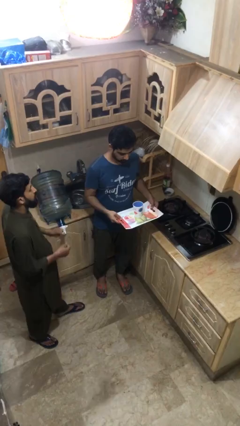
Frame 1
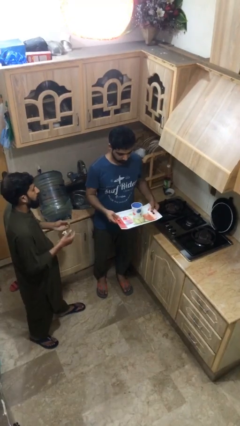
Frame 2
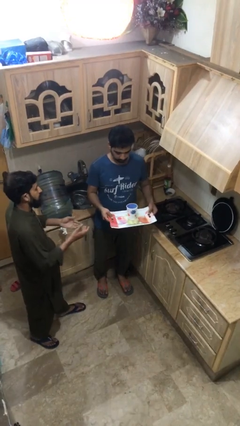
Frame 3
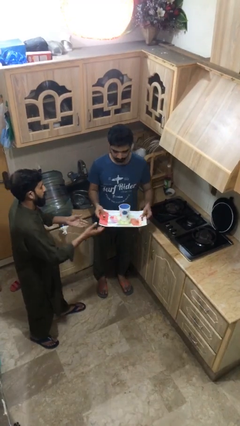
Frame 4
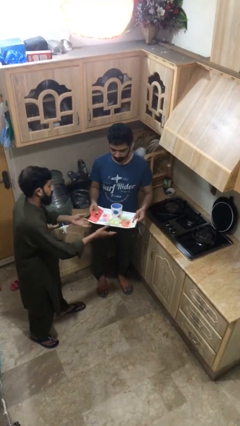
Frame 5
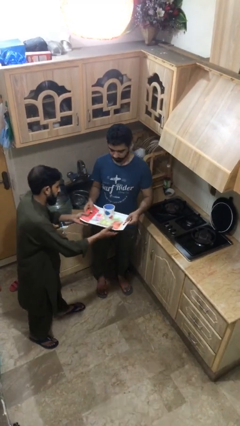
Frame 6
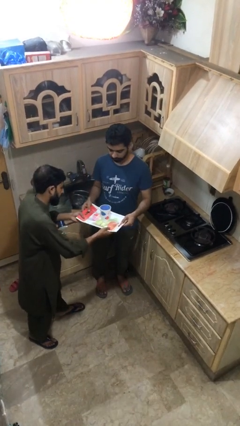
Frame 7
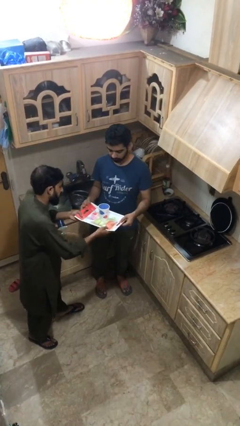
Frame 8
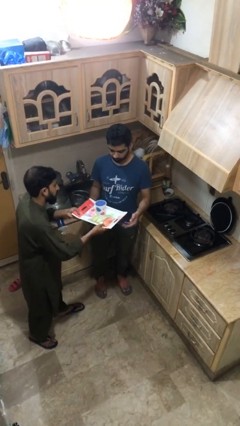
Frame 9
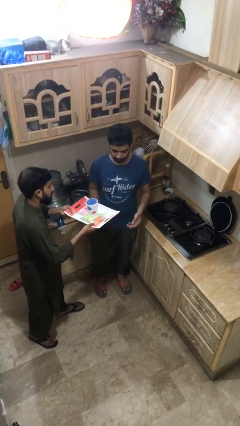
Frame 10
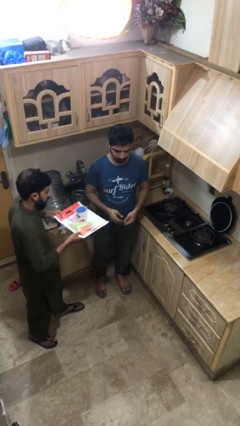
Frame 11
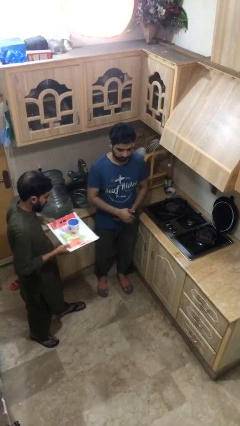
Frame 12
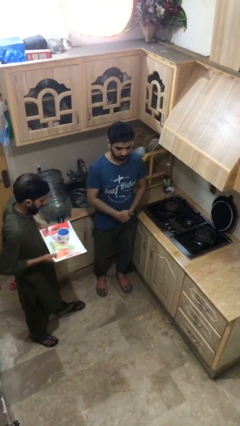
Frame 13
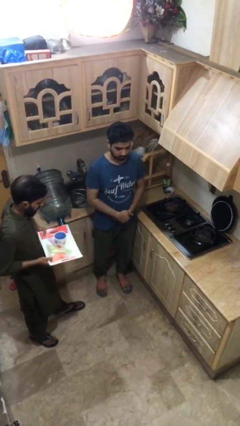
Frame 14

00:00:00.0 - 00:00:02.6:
person transfers object to person

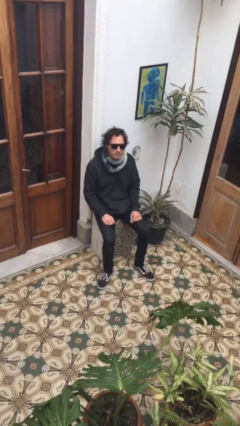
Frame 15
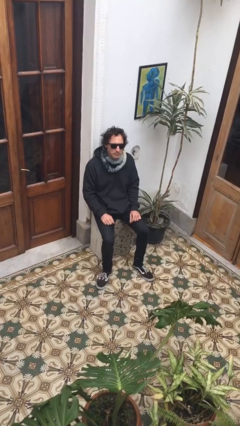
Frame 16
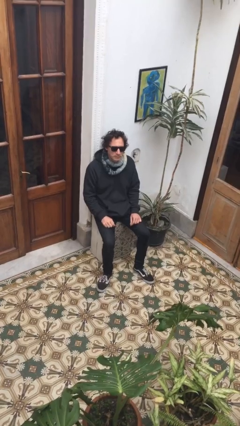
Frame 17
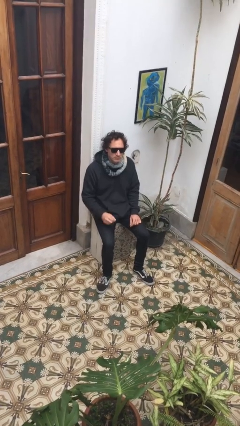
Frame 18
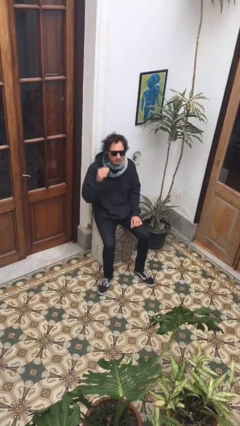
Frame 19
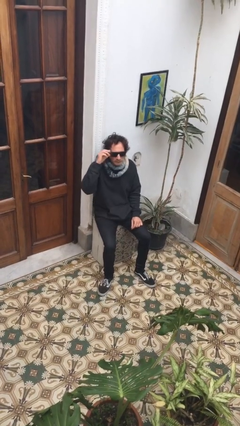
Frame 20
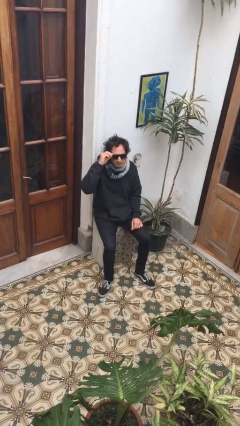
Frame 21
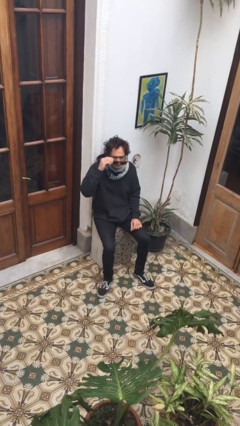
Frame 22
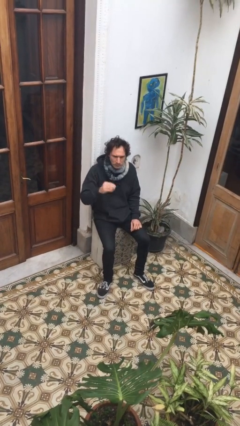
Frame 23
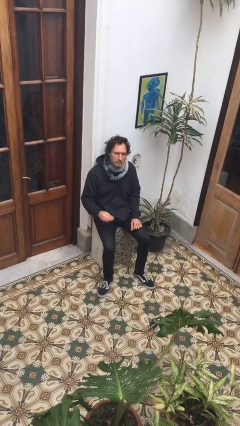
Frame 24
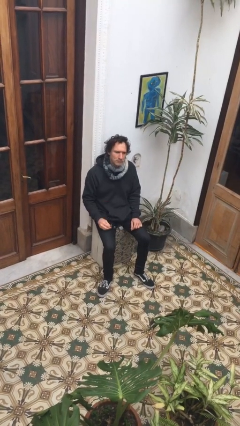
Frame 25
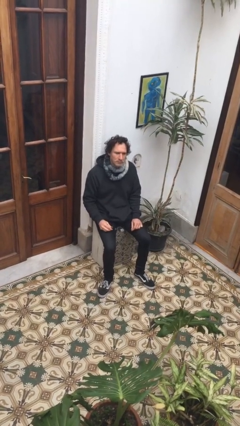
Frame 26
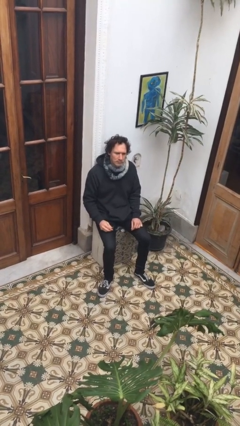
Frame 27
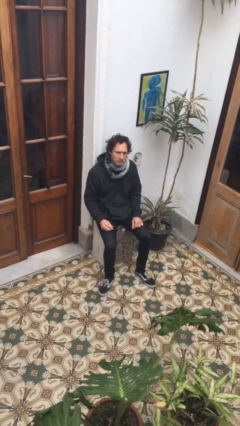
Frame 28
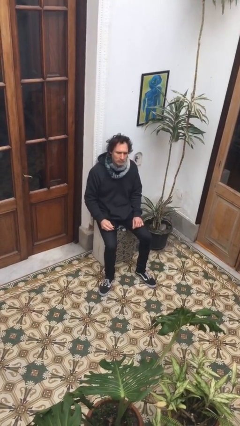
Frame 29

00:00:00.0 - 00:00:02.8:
person takes off sunglasses

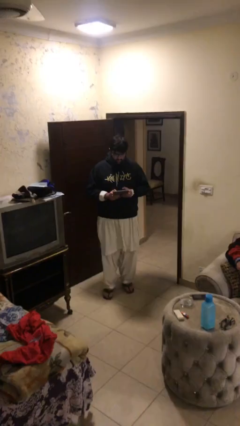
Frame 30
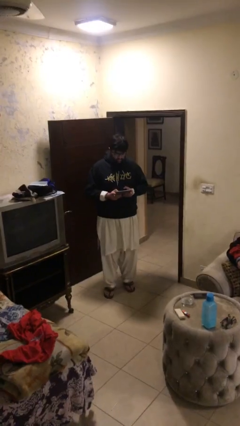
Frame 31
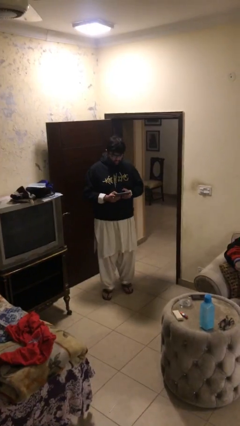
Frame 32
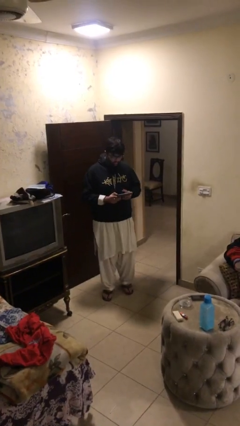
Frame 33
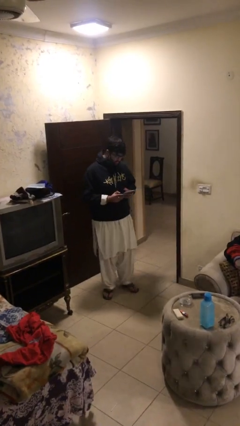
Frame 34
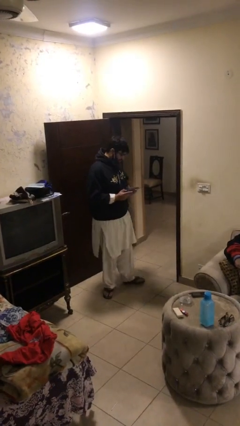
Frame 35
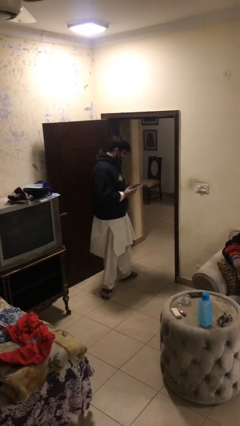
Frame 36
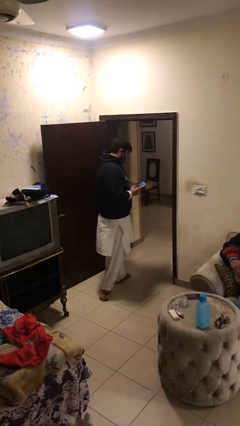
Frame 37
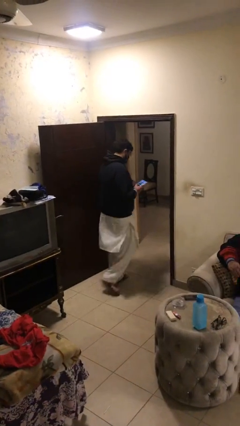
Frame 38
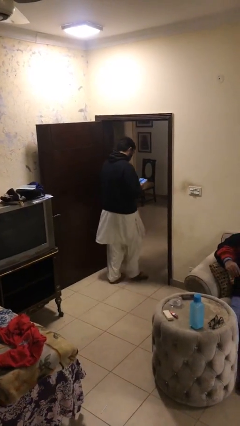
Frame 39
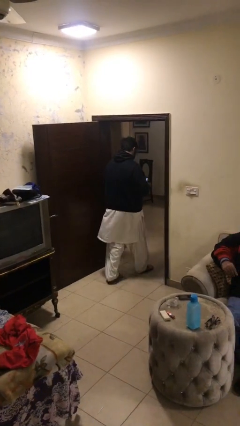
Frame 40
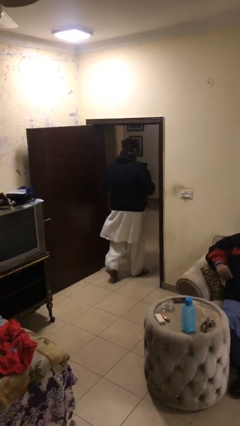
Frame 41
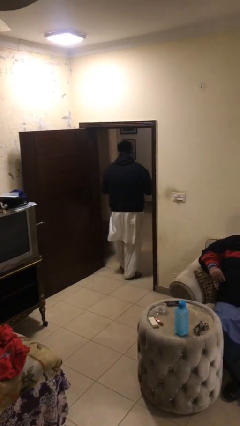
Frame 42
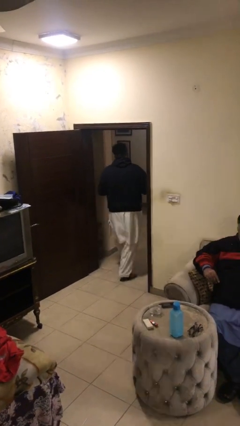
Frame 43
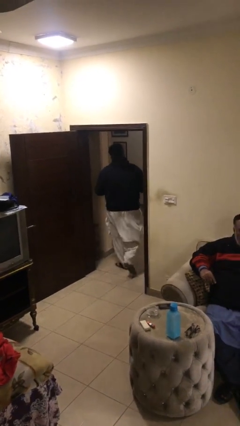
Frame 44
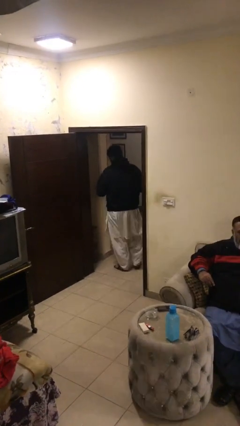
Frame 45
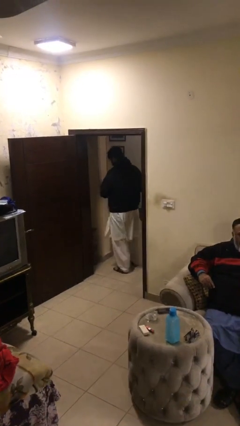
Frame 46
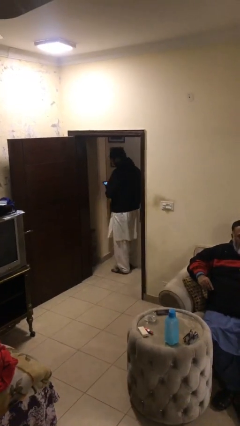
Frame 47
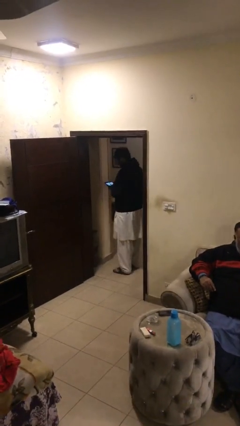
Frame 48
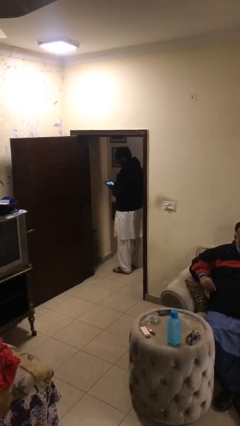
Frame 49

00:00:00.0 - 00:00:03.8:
person exits scene through structure

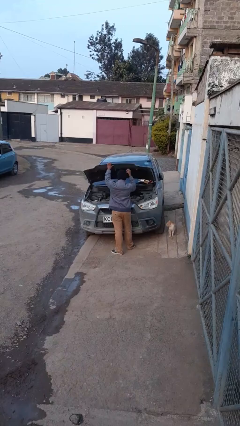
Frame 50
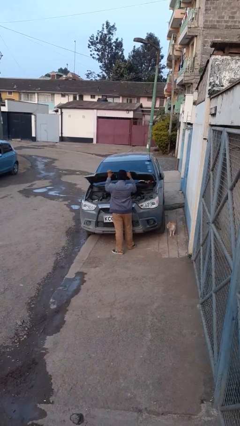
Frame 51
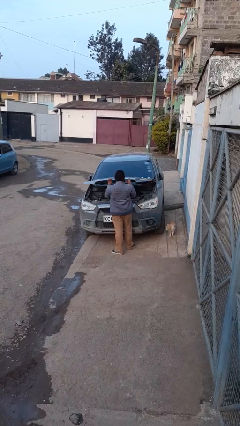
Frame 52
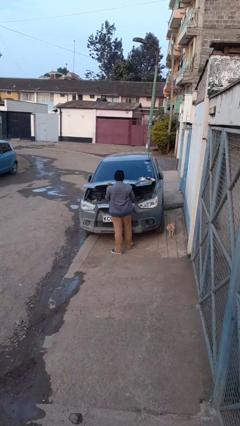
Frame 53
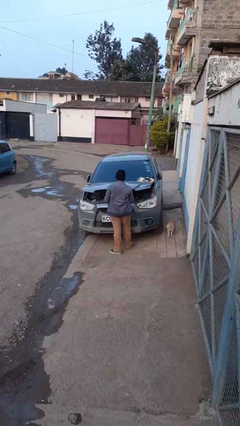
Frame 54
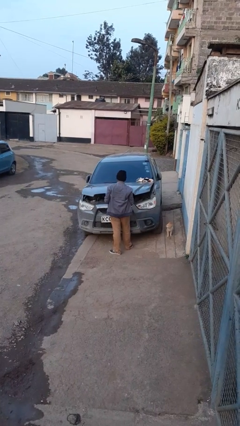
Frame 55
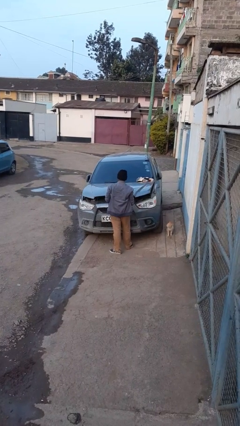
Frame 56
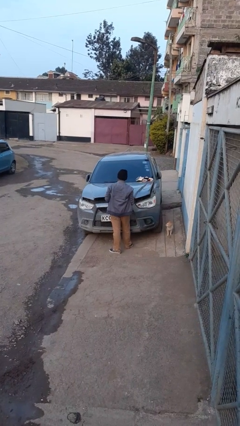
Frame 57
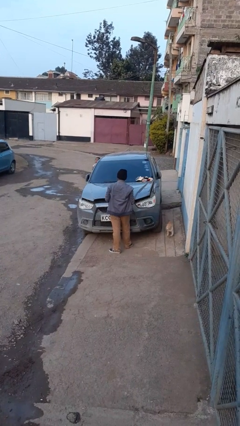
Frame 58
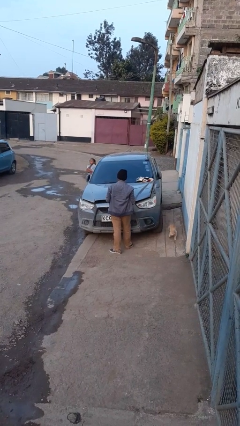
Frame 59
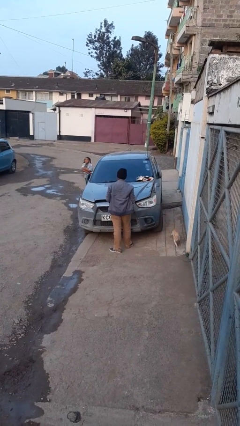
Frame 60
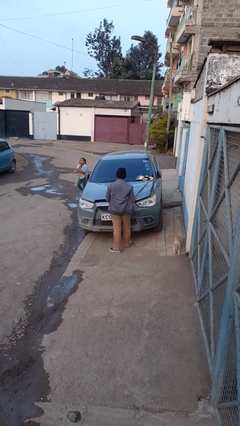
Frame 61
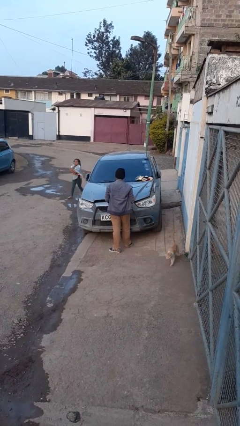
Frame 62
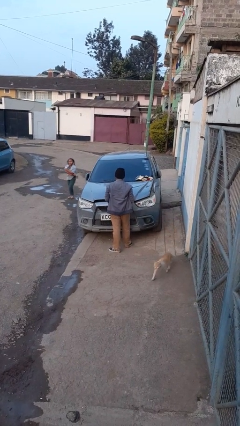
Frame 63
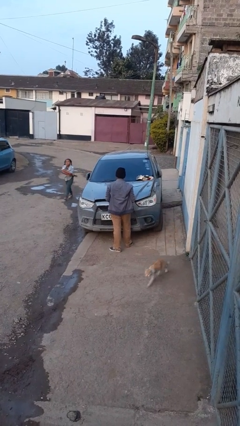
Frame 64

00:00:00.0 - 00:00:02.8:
person closes car hood

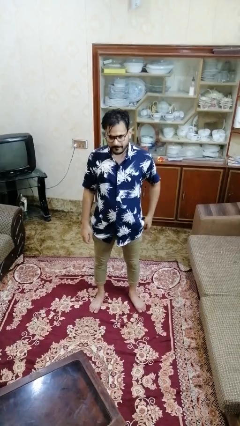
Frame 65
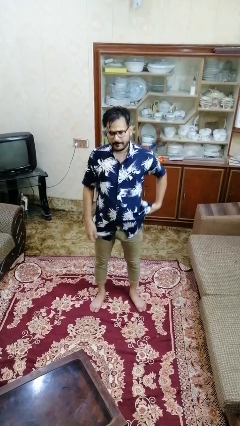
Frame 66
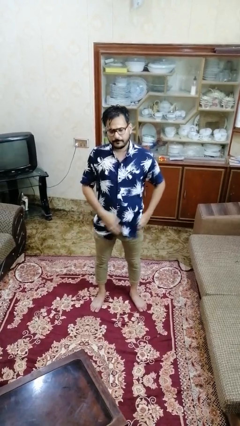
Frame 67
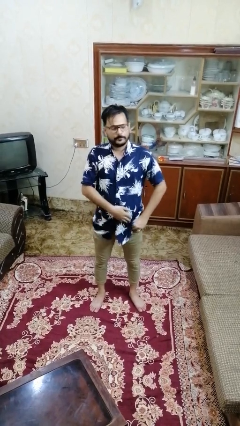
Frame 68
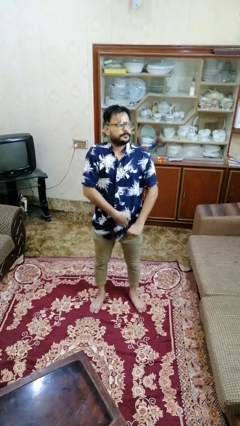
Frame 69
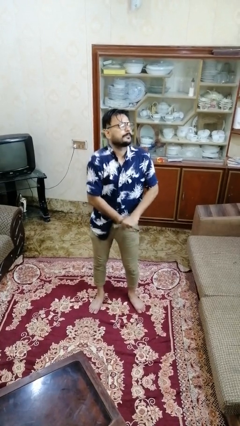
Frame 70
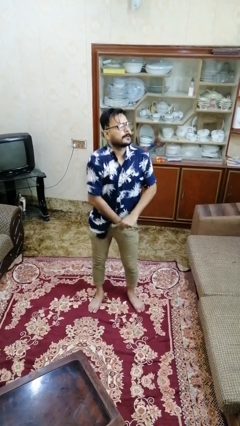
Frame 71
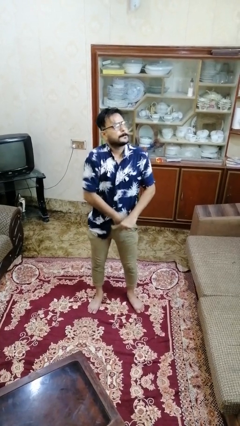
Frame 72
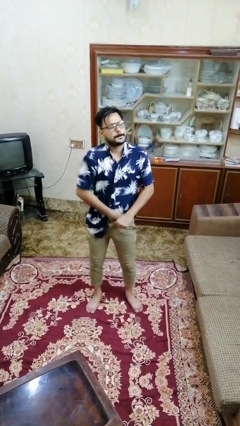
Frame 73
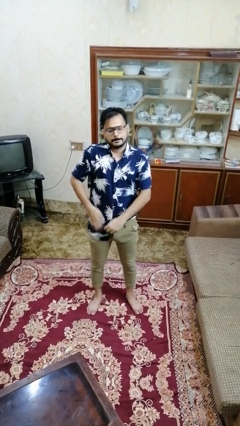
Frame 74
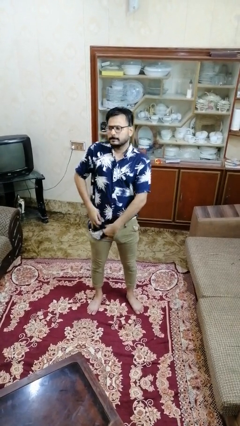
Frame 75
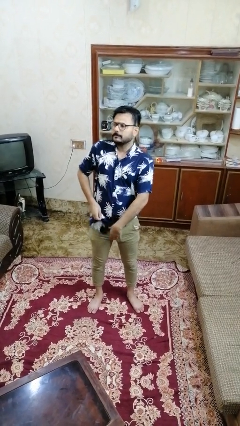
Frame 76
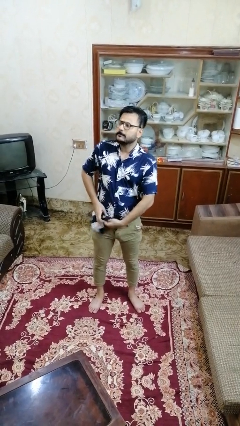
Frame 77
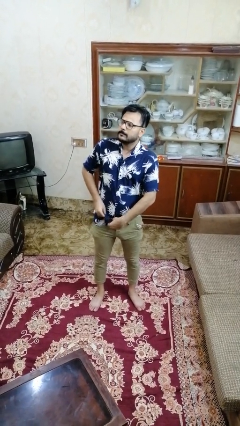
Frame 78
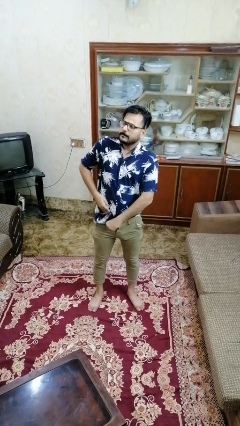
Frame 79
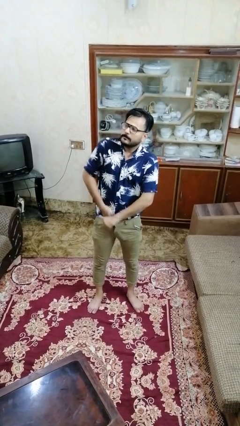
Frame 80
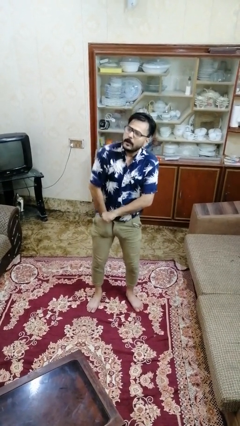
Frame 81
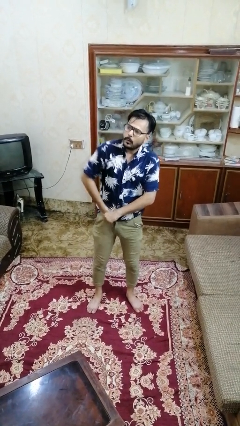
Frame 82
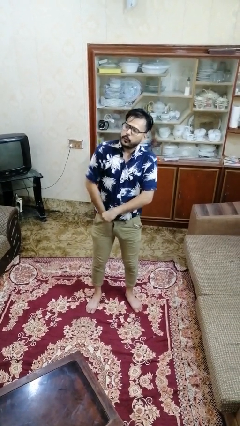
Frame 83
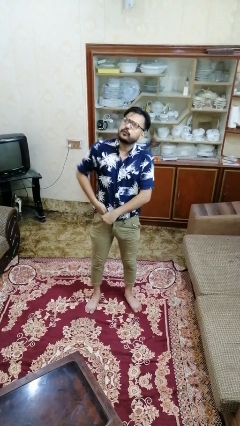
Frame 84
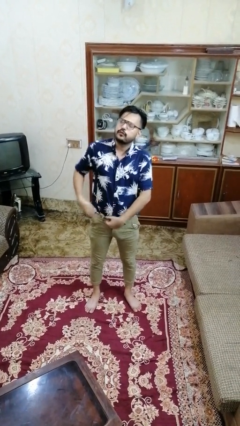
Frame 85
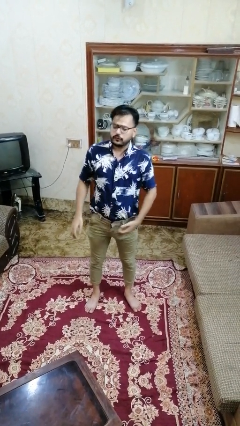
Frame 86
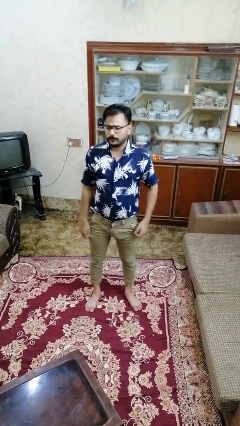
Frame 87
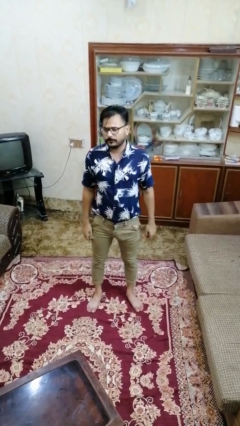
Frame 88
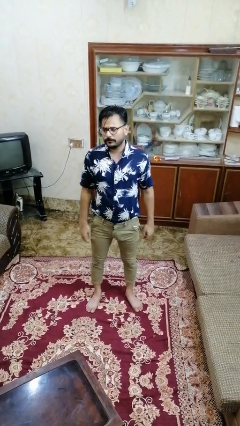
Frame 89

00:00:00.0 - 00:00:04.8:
person tucks in shirt

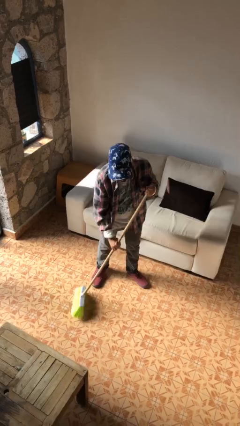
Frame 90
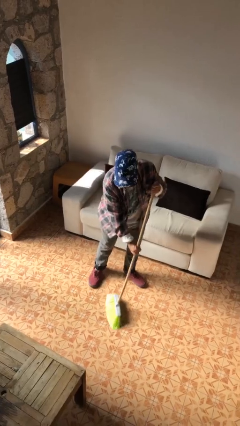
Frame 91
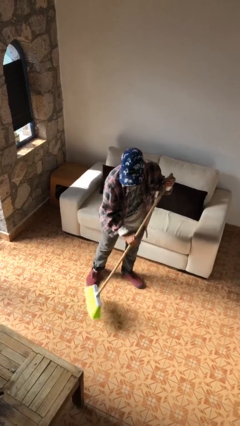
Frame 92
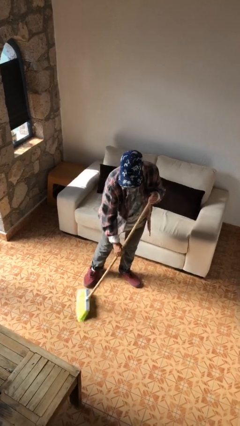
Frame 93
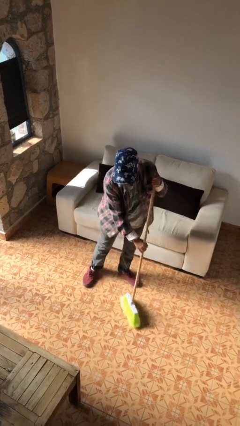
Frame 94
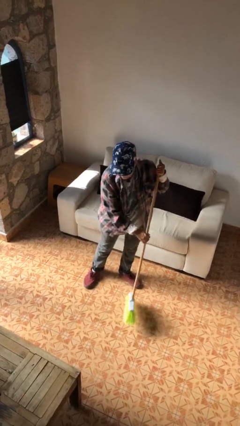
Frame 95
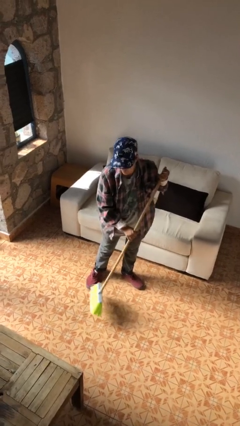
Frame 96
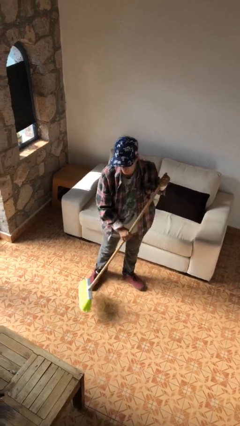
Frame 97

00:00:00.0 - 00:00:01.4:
person sweeps floor
